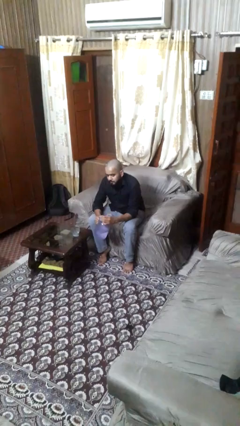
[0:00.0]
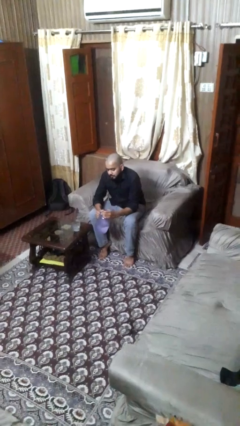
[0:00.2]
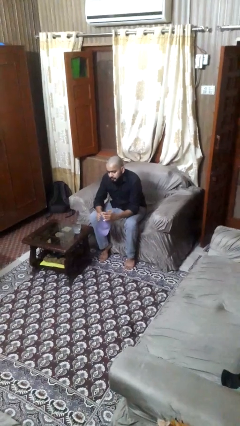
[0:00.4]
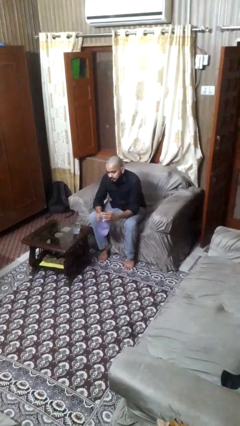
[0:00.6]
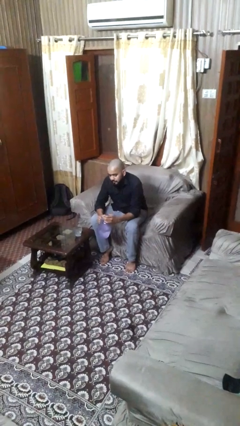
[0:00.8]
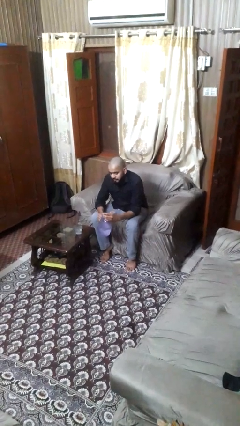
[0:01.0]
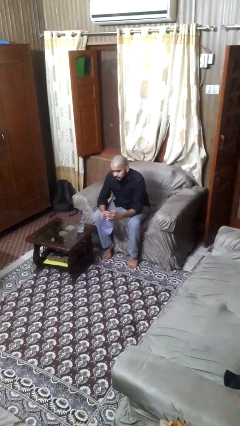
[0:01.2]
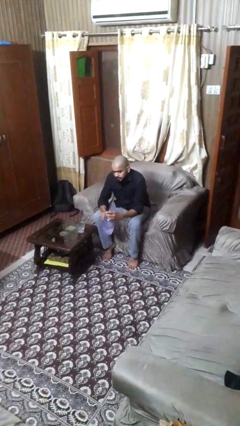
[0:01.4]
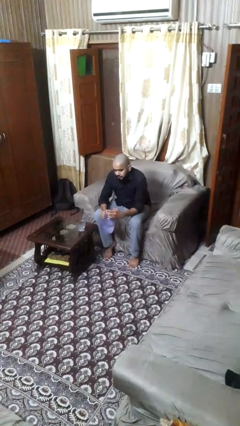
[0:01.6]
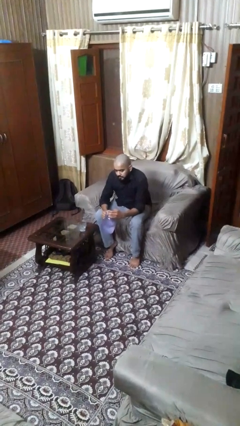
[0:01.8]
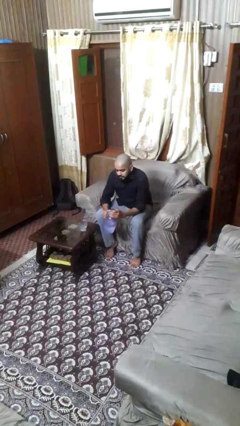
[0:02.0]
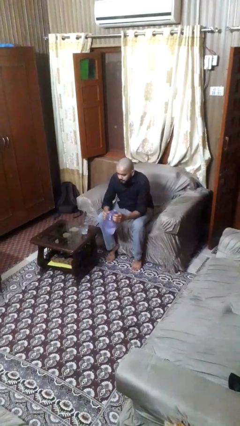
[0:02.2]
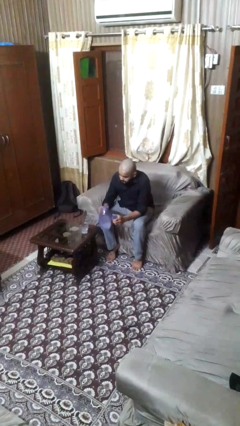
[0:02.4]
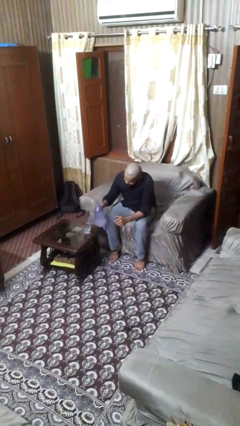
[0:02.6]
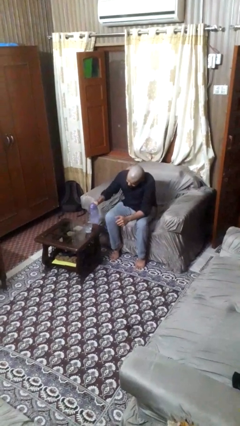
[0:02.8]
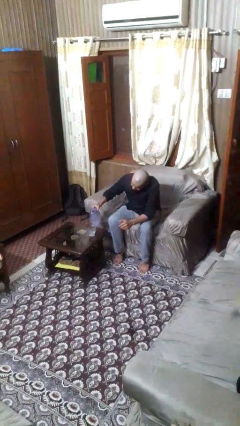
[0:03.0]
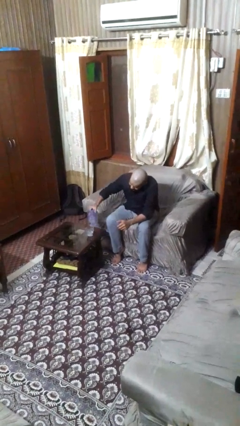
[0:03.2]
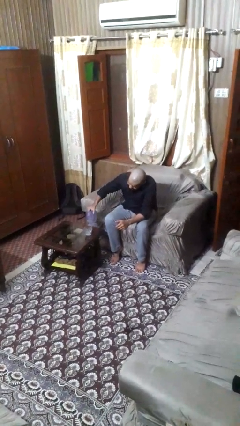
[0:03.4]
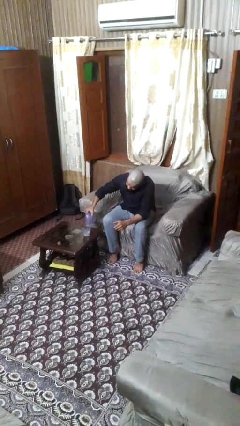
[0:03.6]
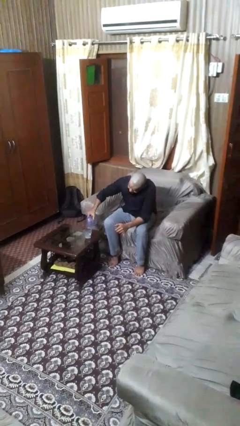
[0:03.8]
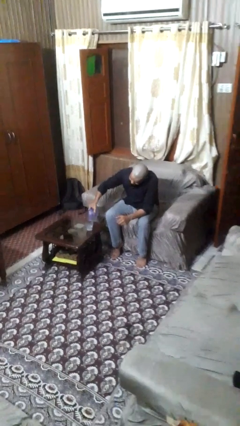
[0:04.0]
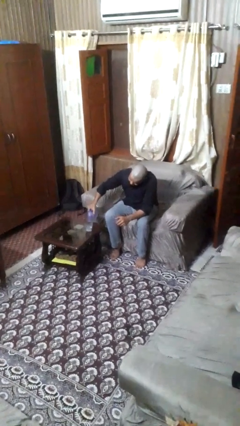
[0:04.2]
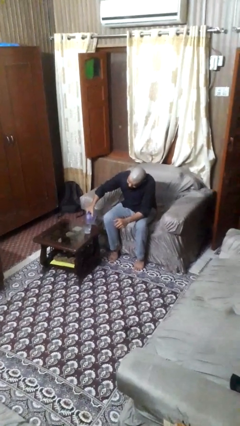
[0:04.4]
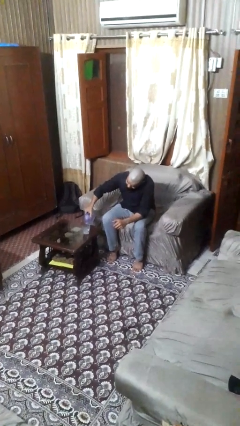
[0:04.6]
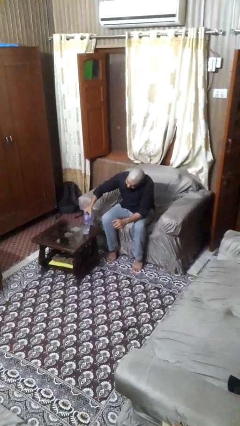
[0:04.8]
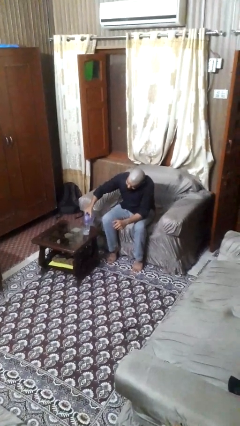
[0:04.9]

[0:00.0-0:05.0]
person unscrews lid from bottle

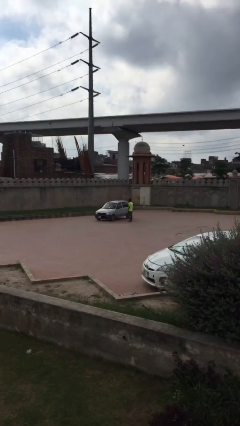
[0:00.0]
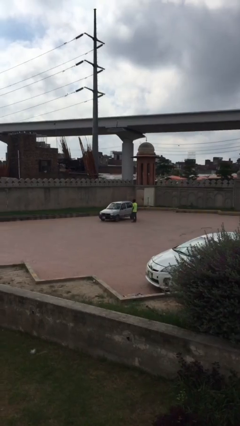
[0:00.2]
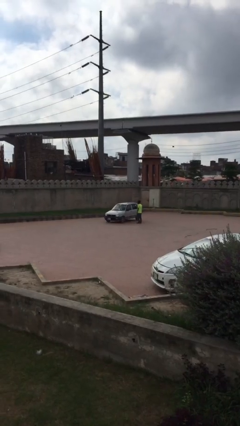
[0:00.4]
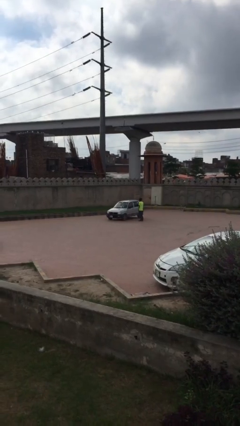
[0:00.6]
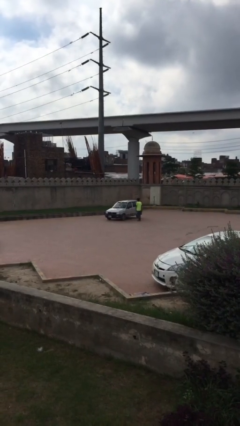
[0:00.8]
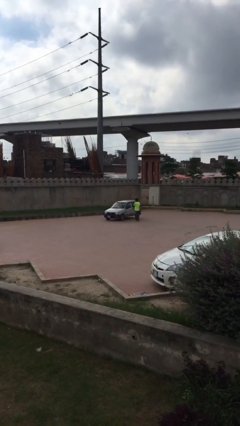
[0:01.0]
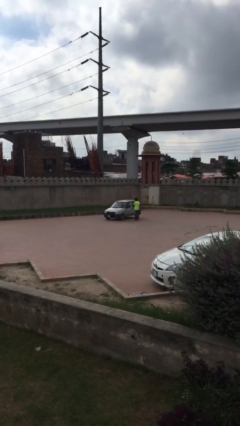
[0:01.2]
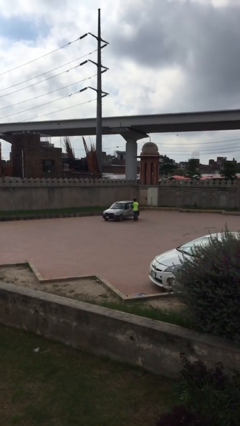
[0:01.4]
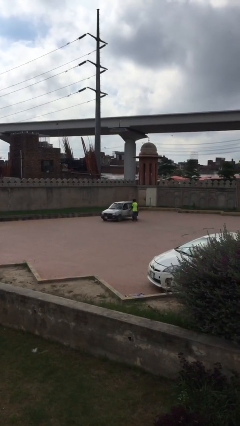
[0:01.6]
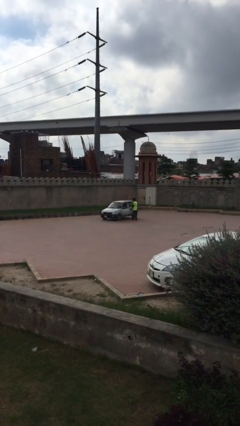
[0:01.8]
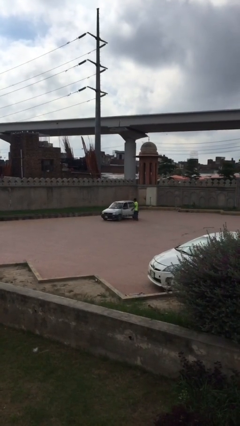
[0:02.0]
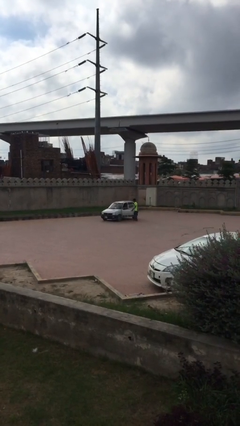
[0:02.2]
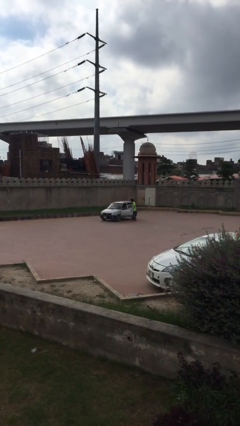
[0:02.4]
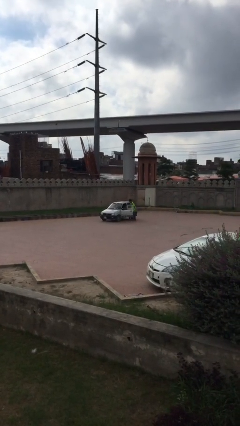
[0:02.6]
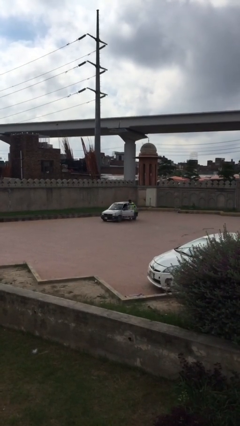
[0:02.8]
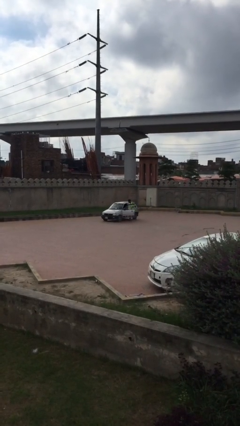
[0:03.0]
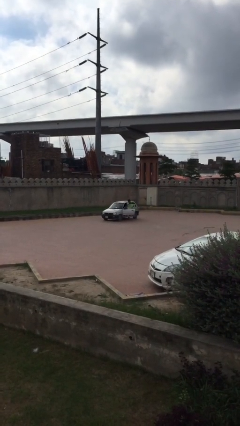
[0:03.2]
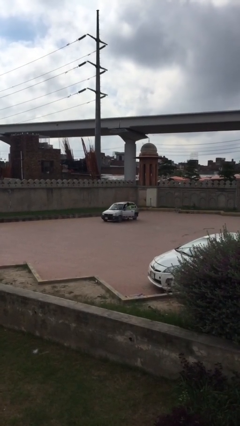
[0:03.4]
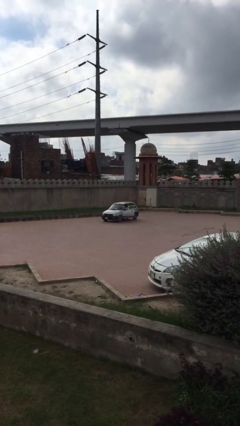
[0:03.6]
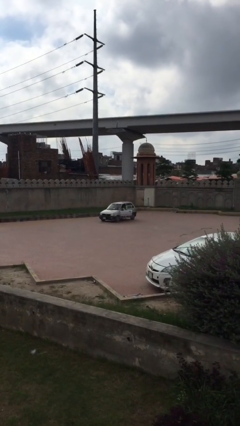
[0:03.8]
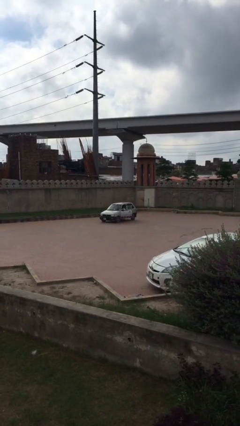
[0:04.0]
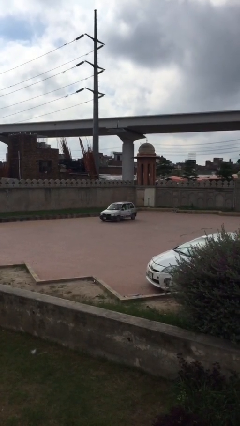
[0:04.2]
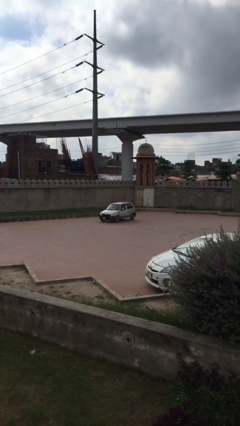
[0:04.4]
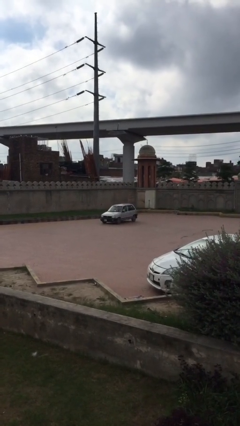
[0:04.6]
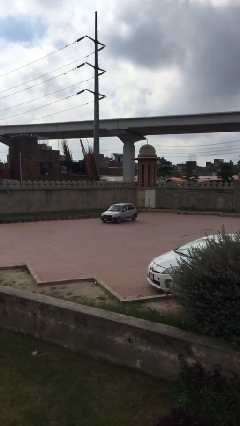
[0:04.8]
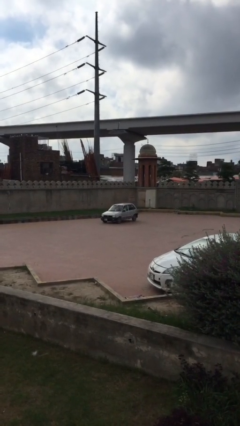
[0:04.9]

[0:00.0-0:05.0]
car picks up person

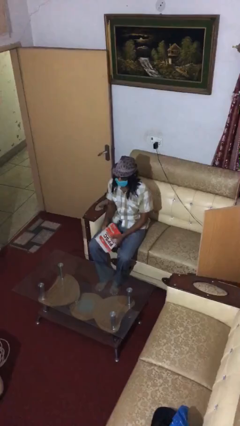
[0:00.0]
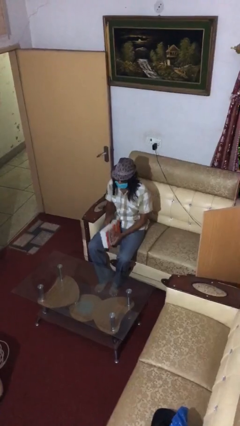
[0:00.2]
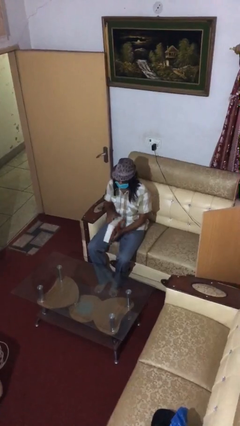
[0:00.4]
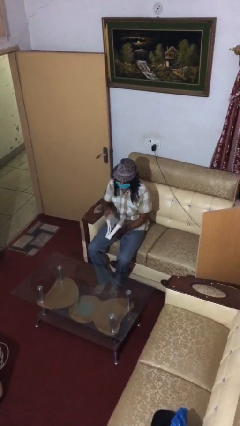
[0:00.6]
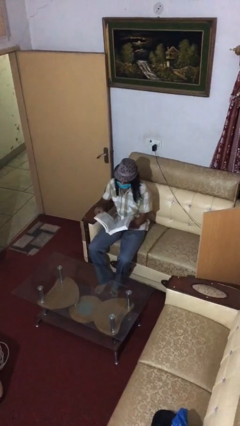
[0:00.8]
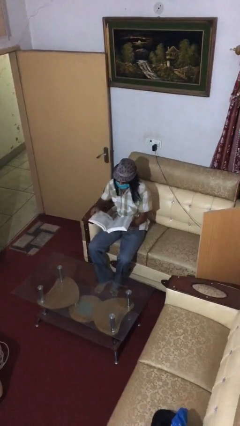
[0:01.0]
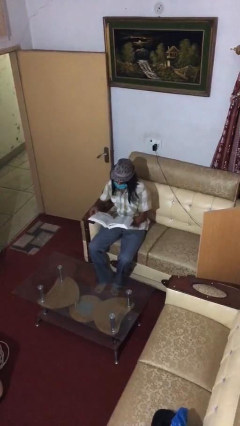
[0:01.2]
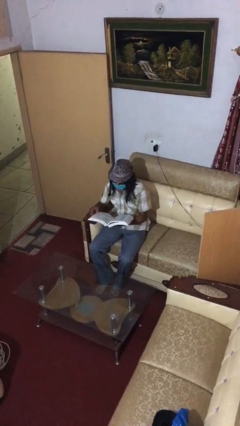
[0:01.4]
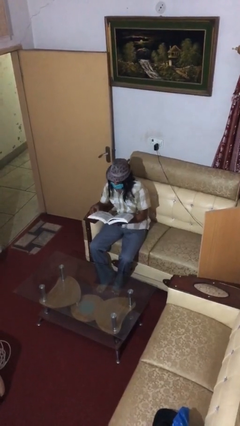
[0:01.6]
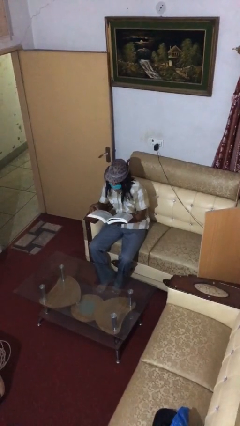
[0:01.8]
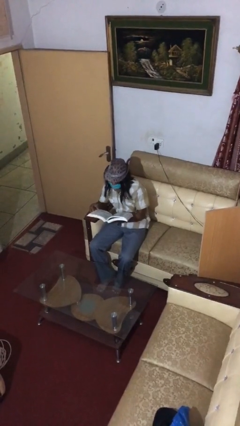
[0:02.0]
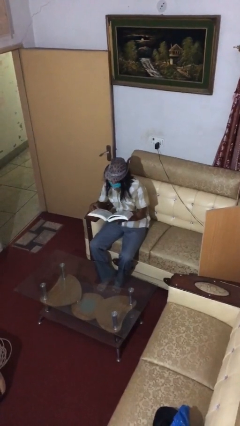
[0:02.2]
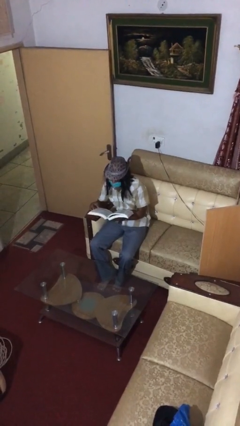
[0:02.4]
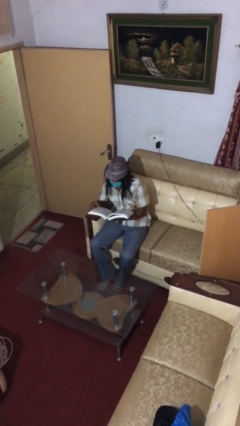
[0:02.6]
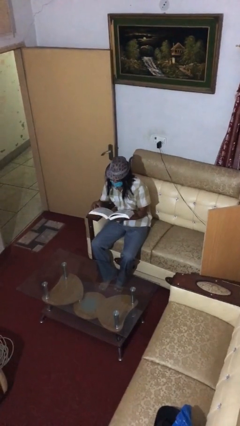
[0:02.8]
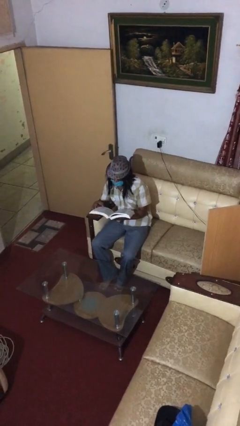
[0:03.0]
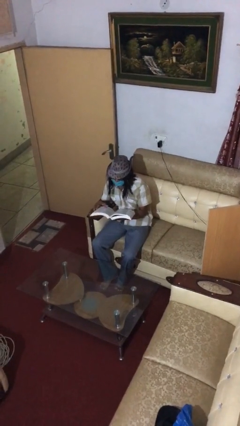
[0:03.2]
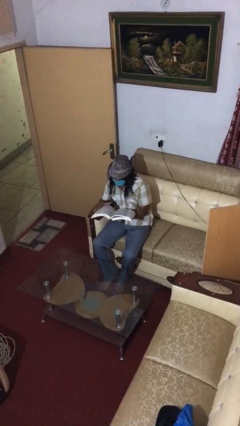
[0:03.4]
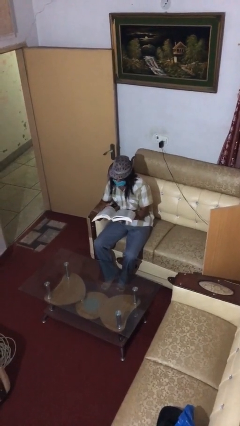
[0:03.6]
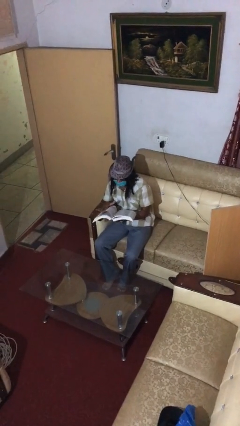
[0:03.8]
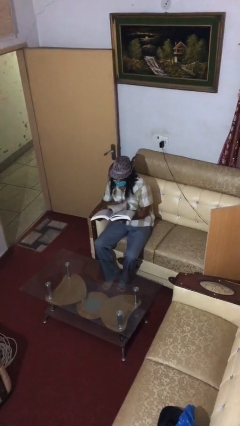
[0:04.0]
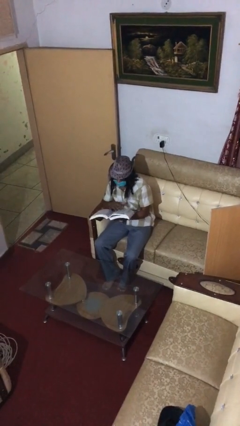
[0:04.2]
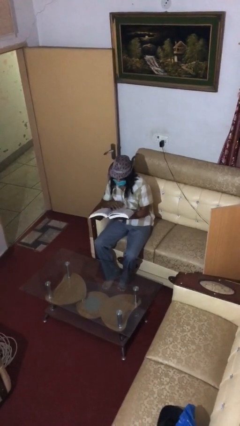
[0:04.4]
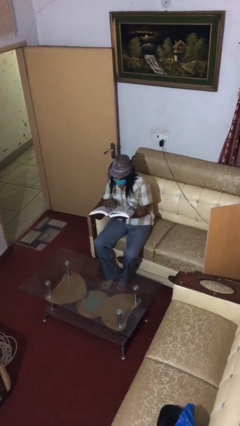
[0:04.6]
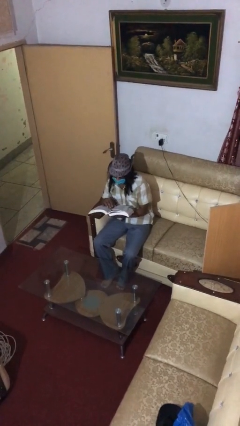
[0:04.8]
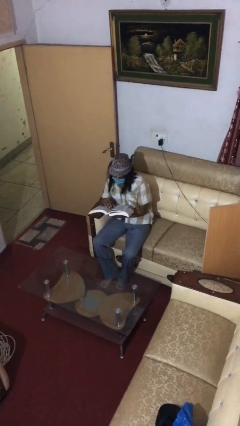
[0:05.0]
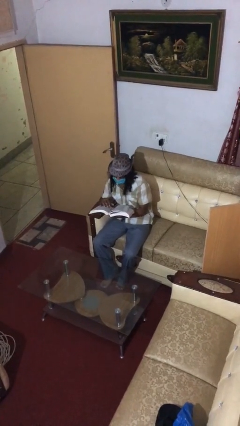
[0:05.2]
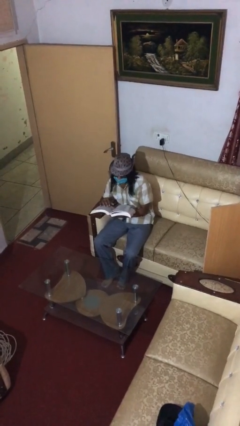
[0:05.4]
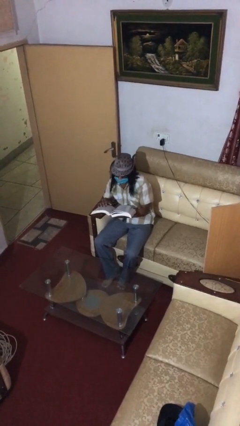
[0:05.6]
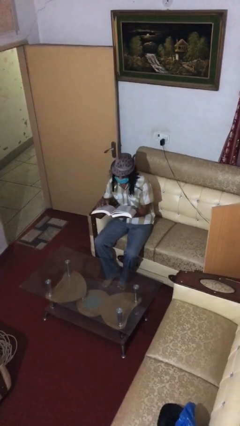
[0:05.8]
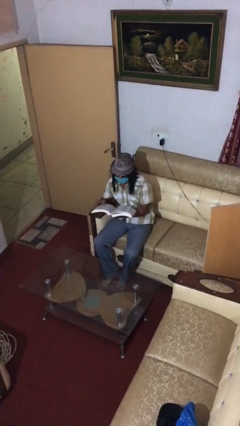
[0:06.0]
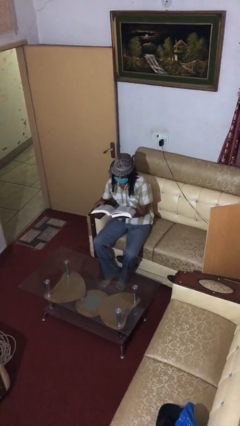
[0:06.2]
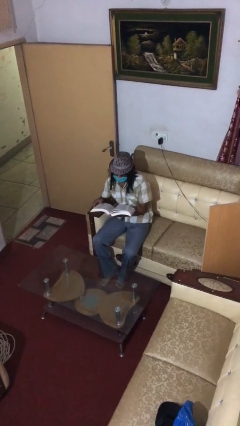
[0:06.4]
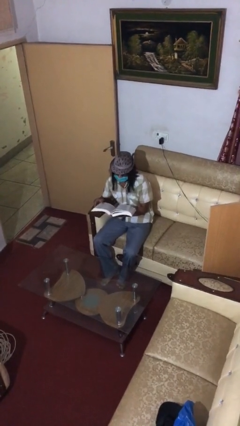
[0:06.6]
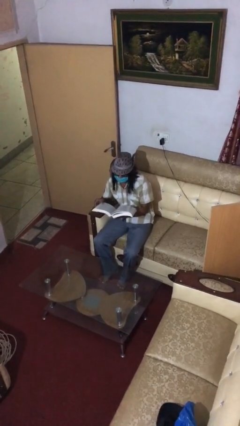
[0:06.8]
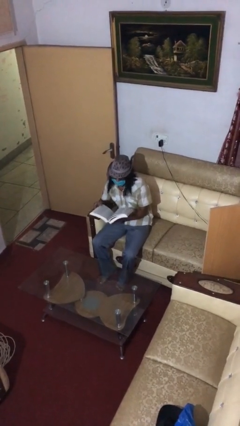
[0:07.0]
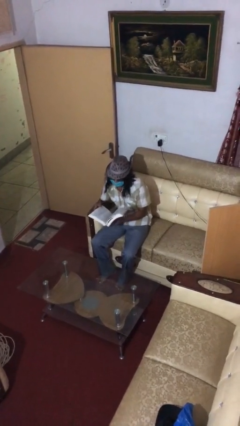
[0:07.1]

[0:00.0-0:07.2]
person reads document

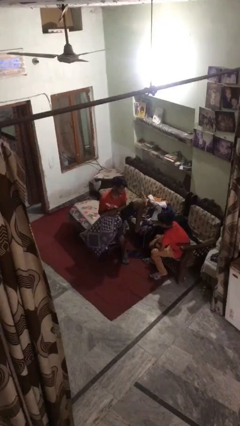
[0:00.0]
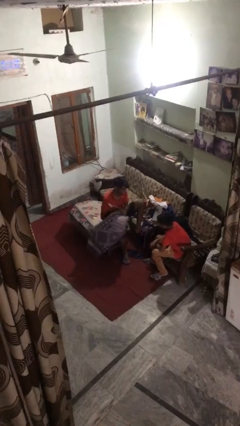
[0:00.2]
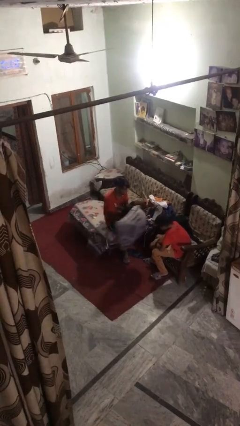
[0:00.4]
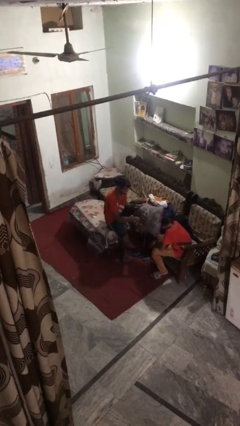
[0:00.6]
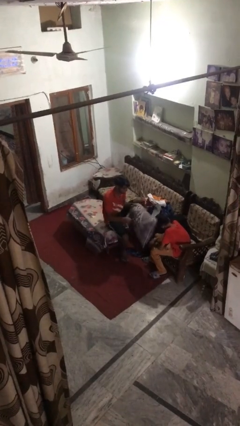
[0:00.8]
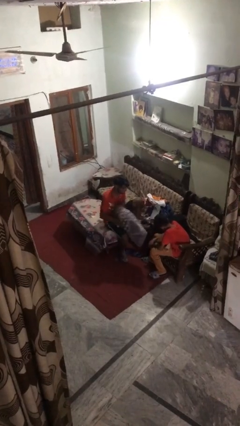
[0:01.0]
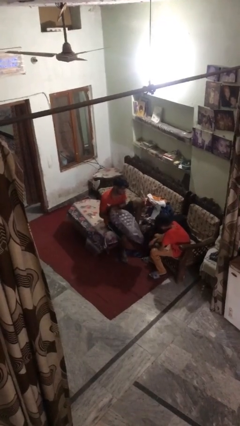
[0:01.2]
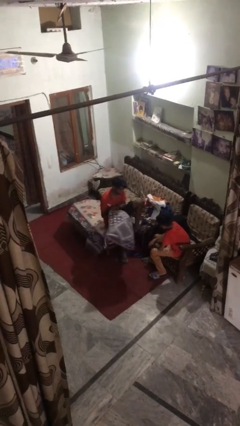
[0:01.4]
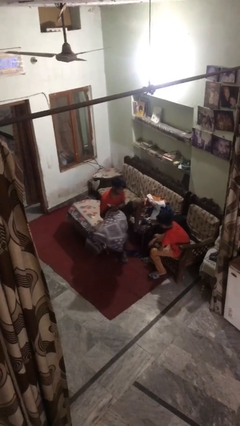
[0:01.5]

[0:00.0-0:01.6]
person hits person with pillow
